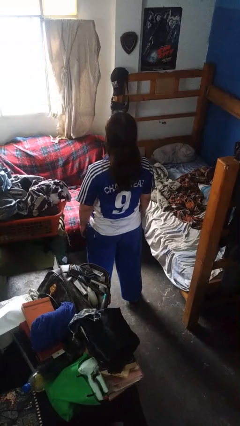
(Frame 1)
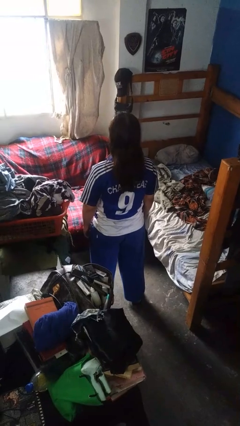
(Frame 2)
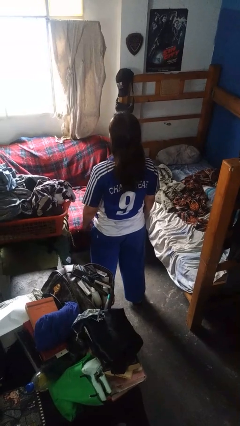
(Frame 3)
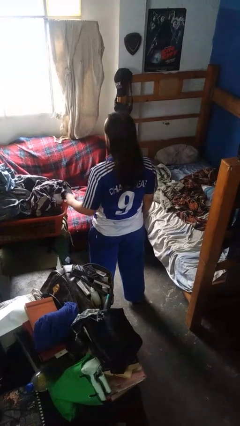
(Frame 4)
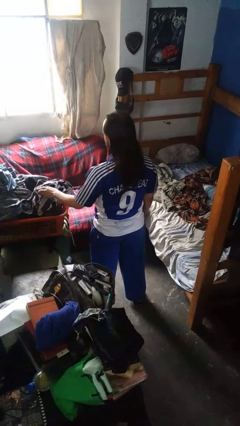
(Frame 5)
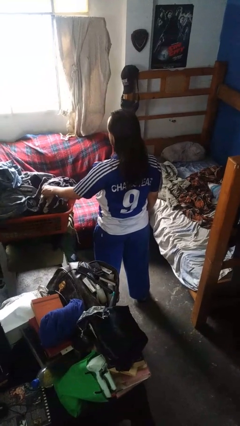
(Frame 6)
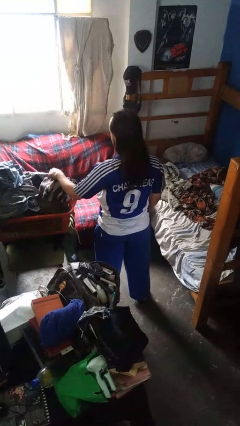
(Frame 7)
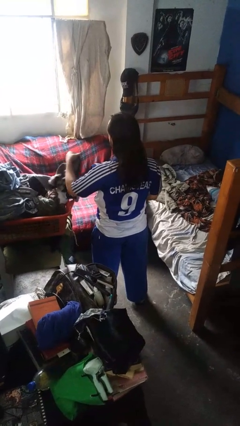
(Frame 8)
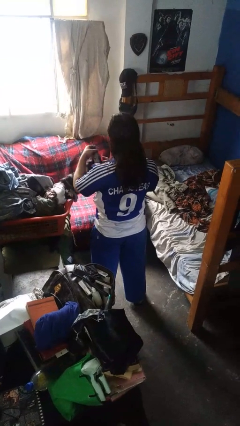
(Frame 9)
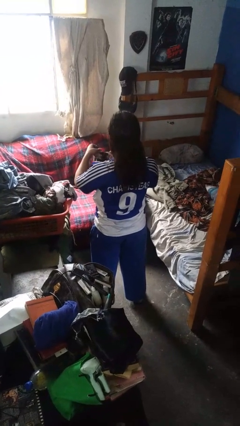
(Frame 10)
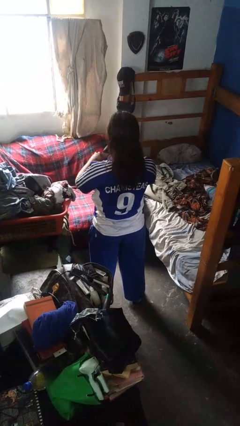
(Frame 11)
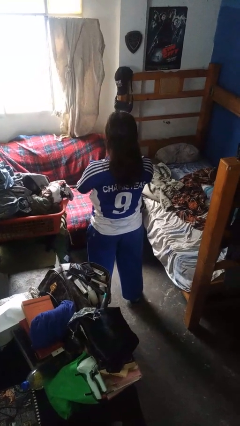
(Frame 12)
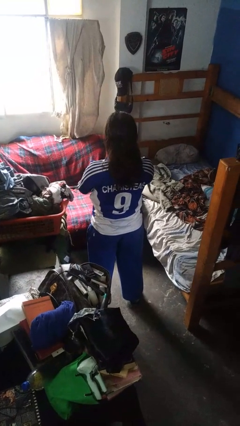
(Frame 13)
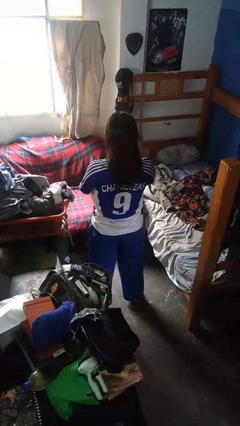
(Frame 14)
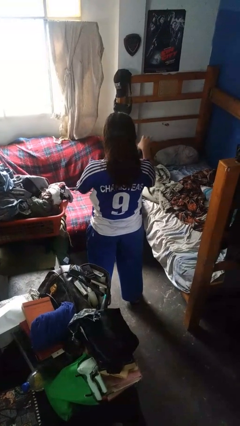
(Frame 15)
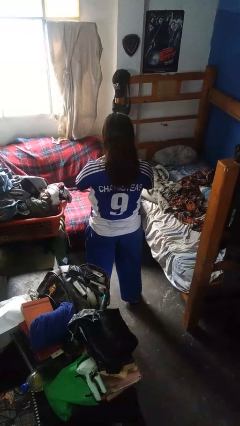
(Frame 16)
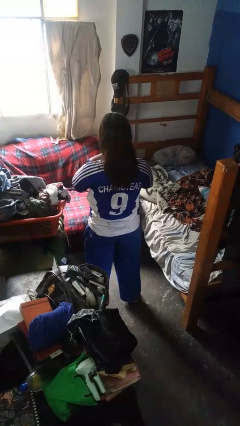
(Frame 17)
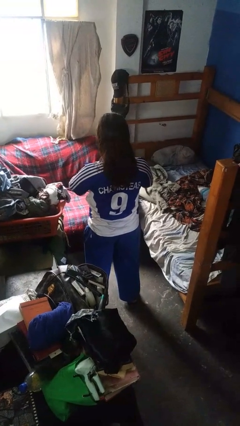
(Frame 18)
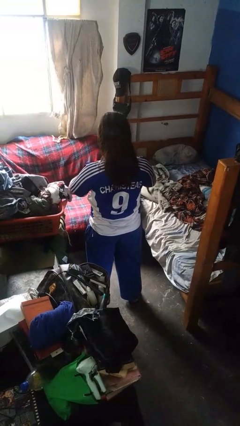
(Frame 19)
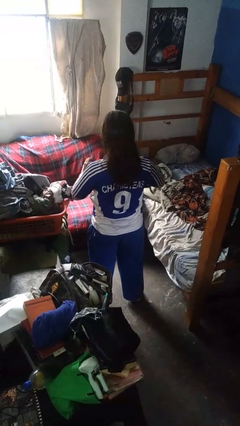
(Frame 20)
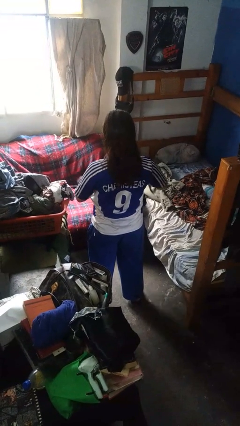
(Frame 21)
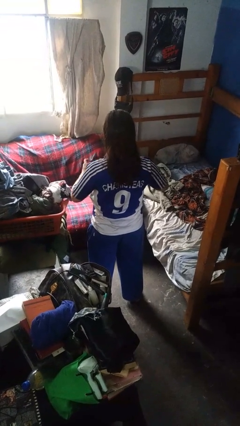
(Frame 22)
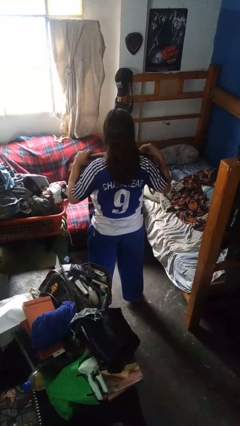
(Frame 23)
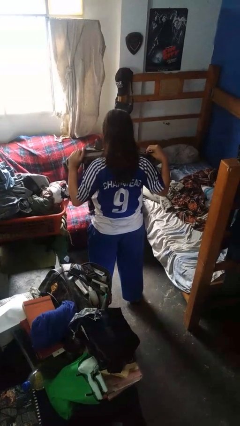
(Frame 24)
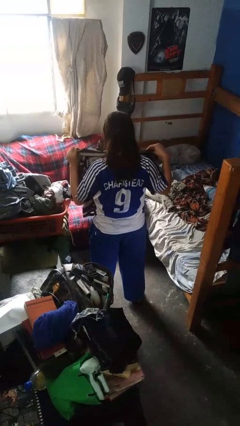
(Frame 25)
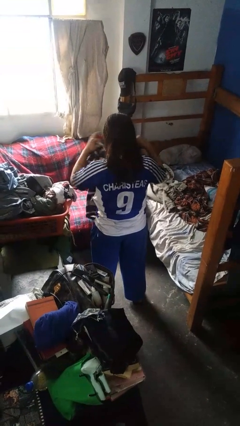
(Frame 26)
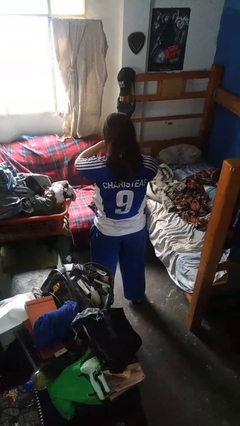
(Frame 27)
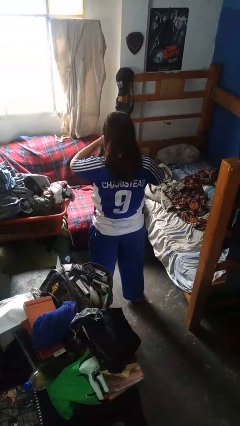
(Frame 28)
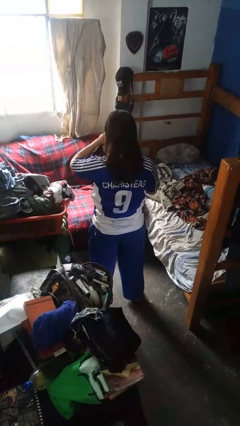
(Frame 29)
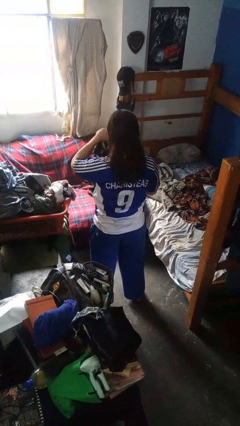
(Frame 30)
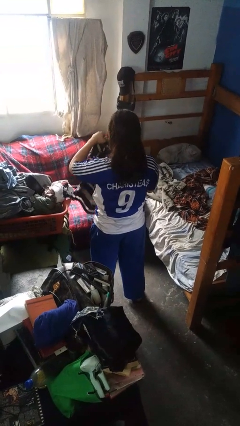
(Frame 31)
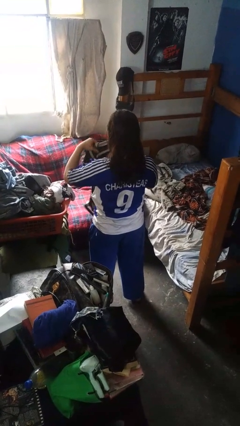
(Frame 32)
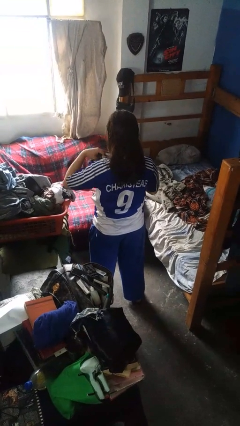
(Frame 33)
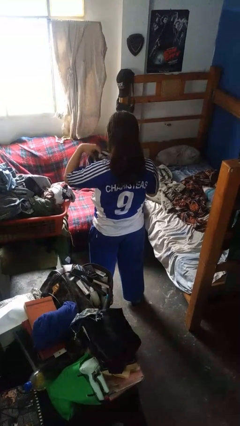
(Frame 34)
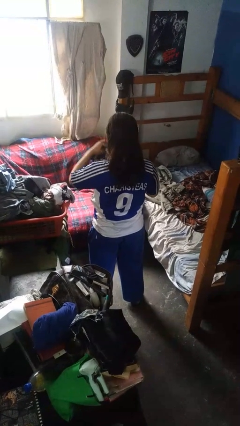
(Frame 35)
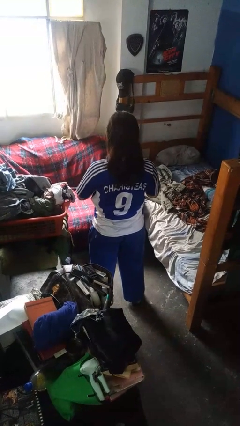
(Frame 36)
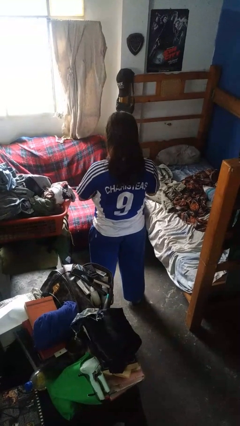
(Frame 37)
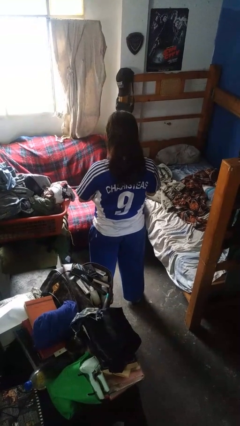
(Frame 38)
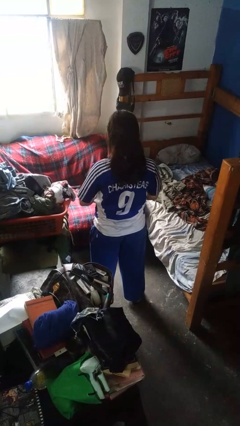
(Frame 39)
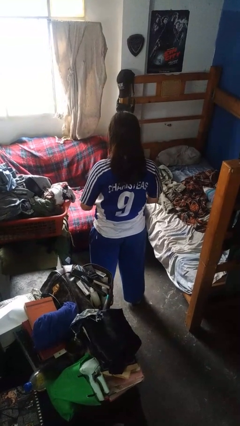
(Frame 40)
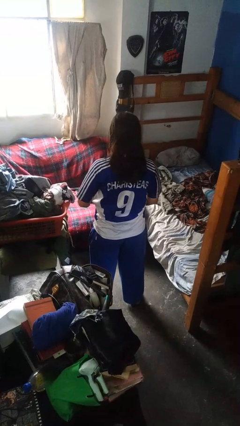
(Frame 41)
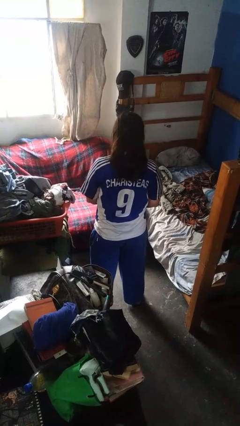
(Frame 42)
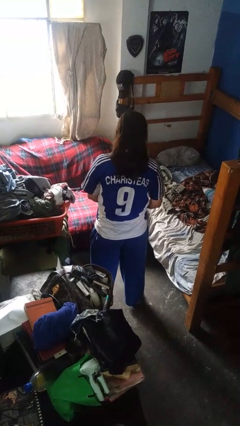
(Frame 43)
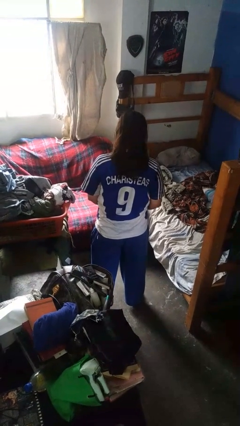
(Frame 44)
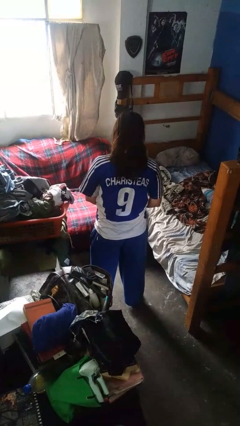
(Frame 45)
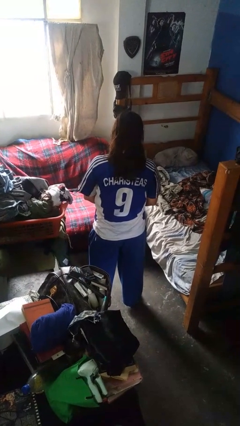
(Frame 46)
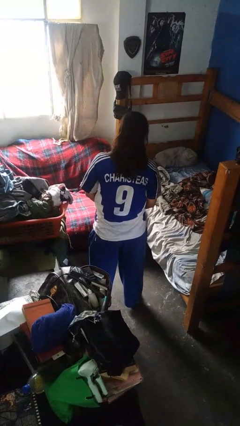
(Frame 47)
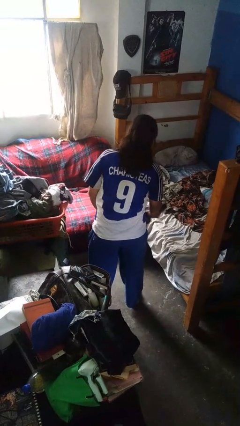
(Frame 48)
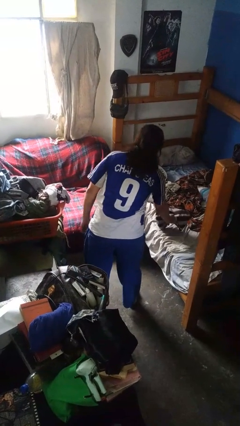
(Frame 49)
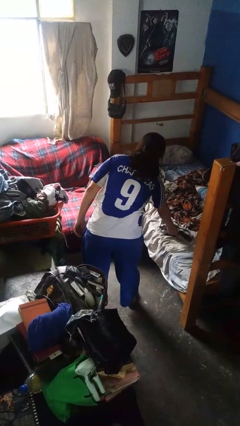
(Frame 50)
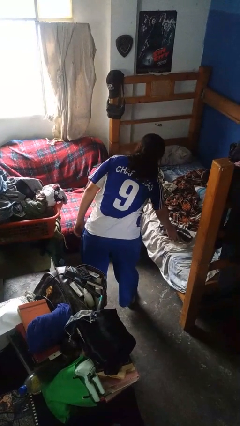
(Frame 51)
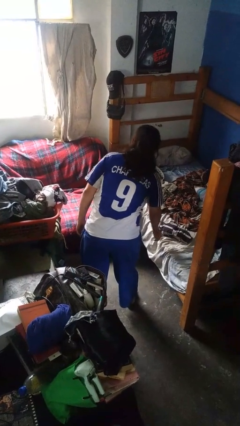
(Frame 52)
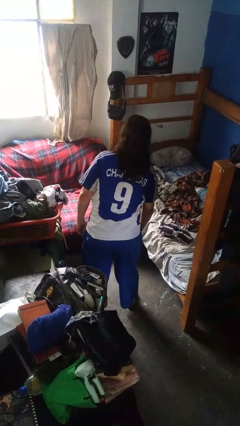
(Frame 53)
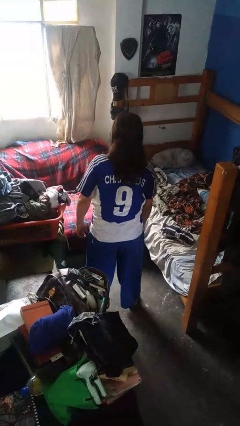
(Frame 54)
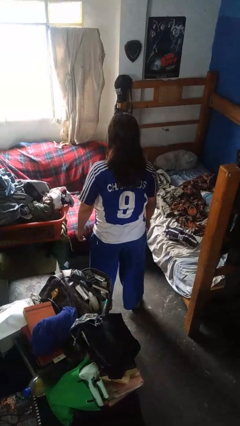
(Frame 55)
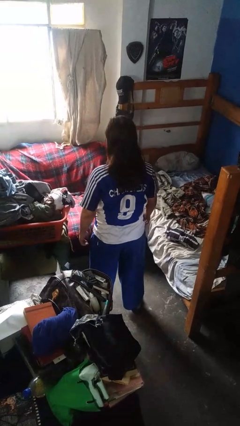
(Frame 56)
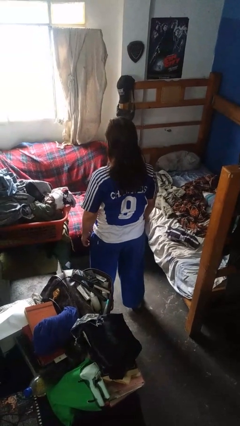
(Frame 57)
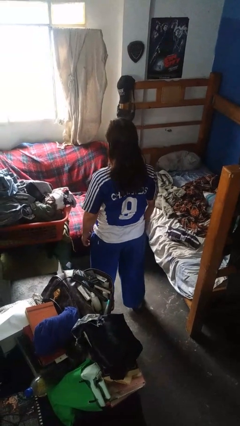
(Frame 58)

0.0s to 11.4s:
person folds shirt

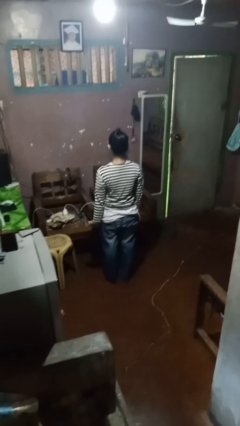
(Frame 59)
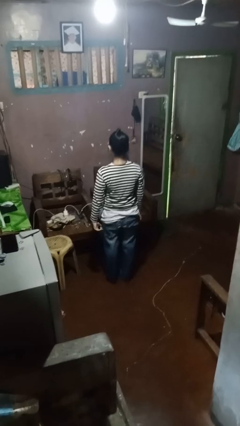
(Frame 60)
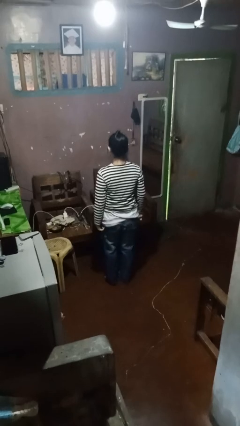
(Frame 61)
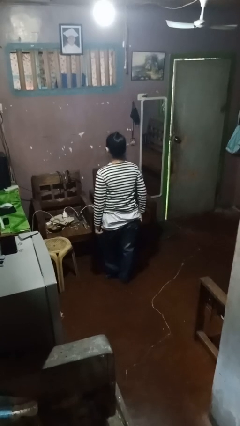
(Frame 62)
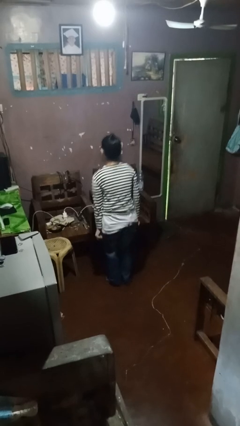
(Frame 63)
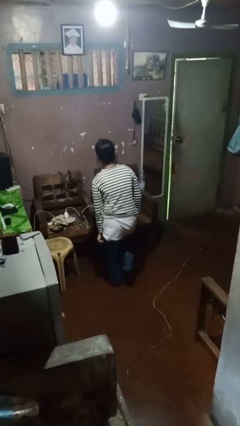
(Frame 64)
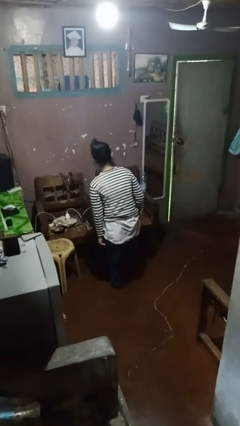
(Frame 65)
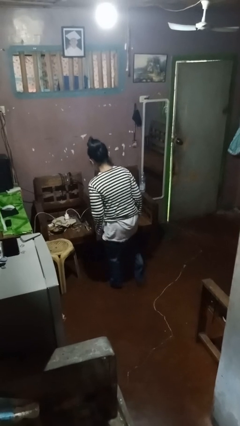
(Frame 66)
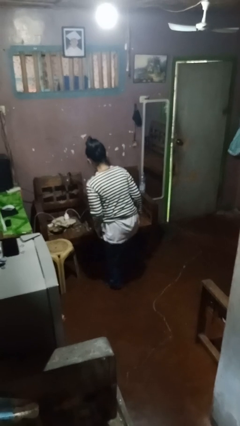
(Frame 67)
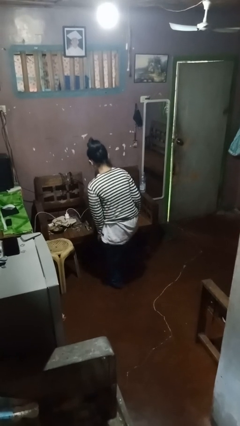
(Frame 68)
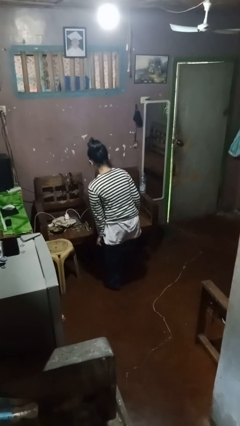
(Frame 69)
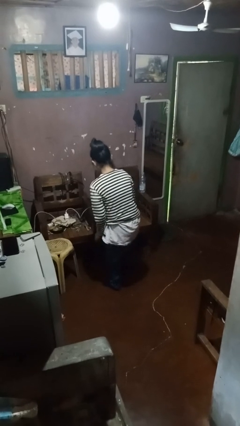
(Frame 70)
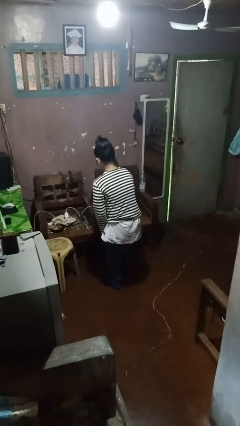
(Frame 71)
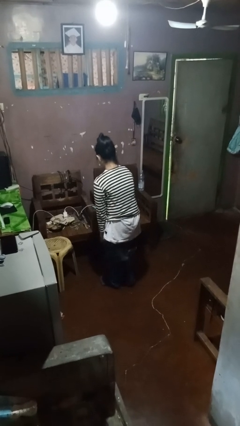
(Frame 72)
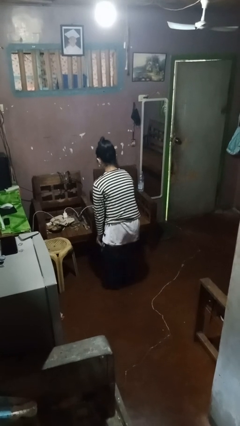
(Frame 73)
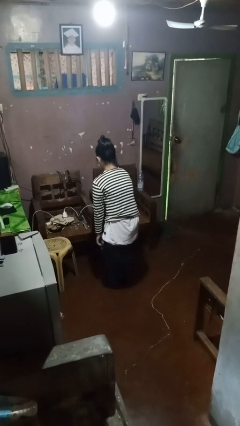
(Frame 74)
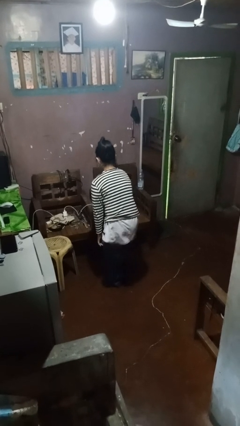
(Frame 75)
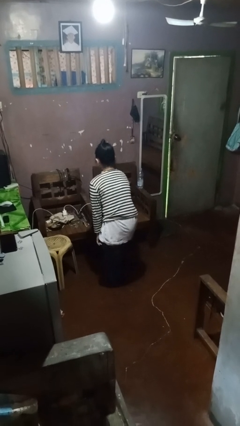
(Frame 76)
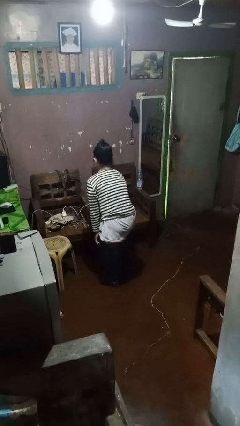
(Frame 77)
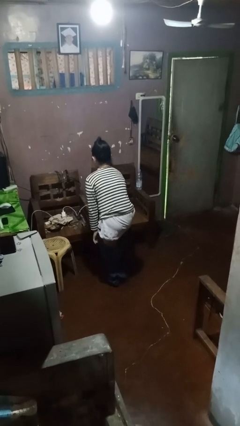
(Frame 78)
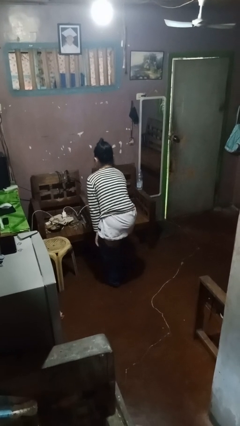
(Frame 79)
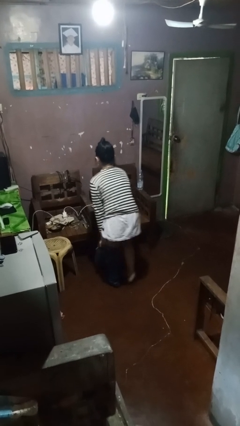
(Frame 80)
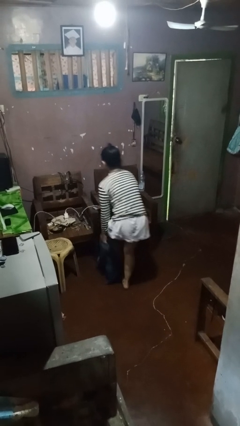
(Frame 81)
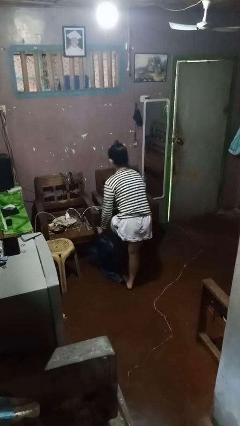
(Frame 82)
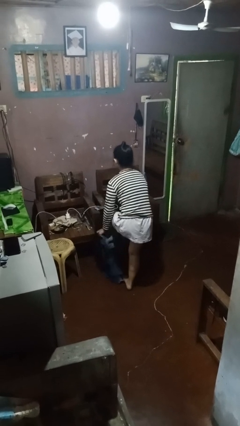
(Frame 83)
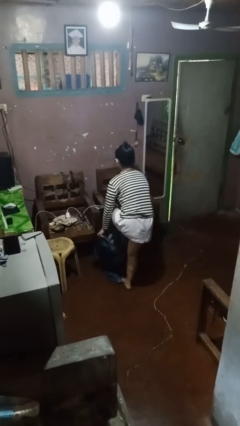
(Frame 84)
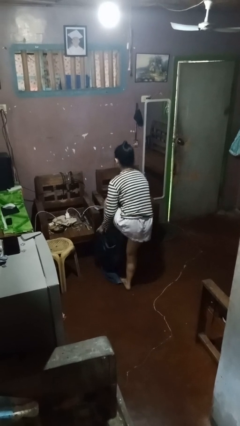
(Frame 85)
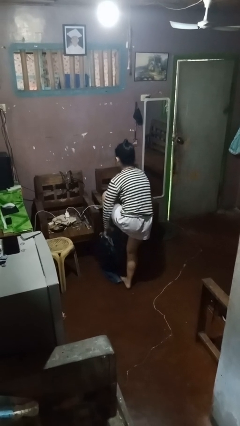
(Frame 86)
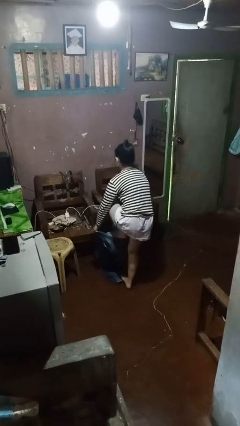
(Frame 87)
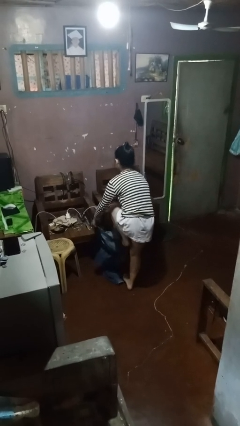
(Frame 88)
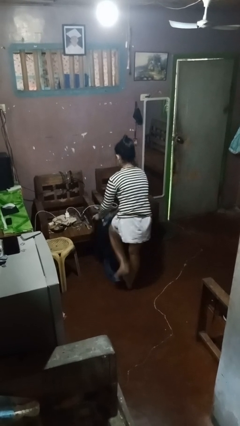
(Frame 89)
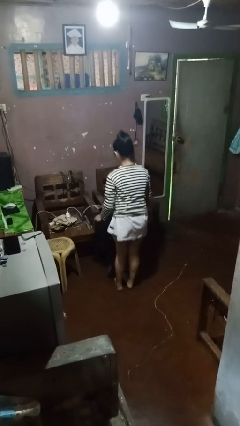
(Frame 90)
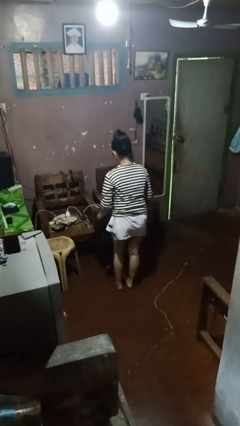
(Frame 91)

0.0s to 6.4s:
person takes off pants

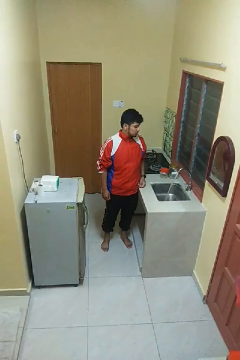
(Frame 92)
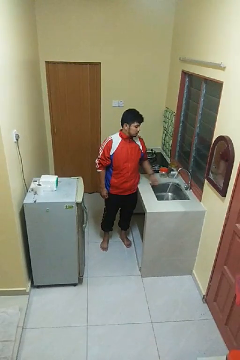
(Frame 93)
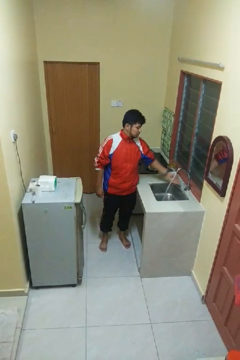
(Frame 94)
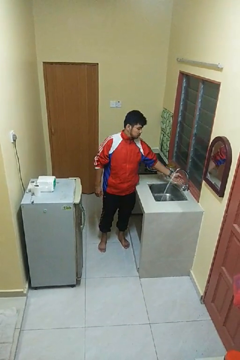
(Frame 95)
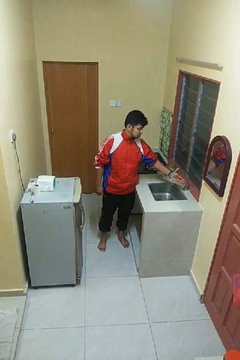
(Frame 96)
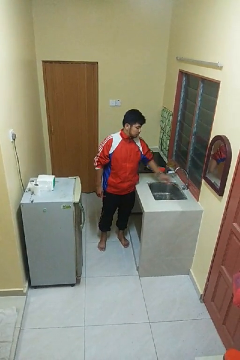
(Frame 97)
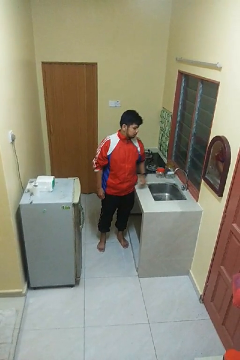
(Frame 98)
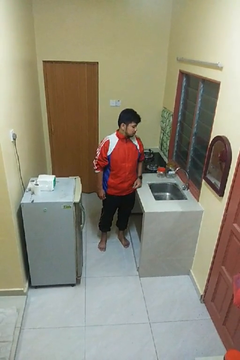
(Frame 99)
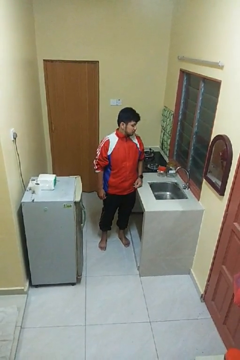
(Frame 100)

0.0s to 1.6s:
person turns off faucet
